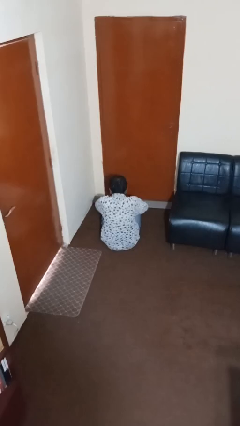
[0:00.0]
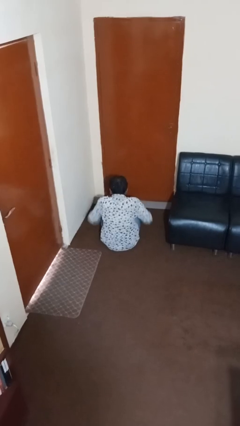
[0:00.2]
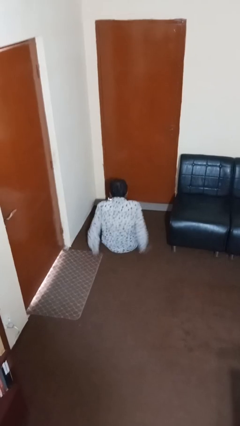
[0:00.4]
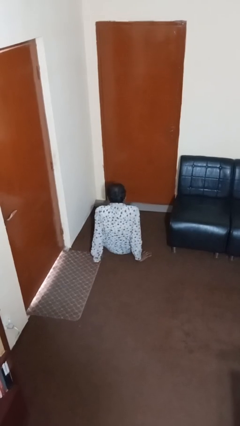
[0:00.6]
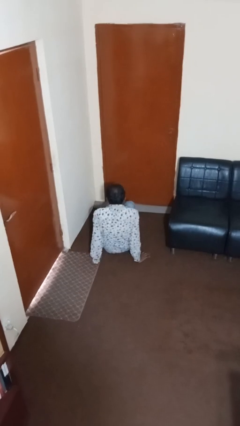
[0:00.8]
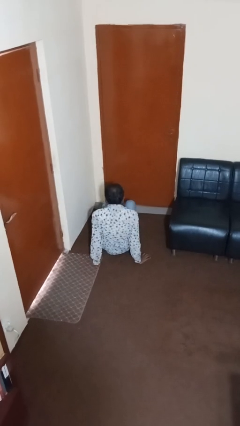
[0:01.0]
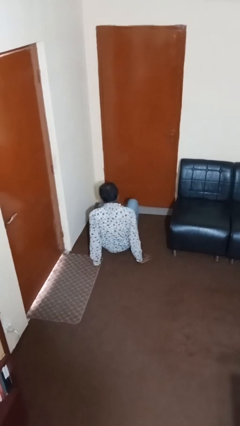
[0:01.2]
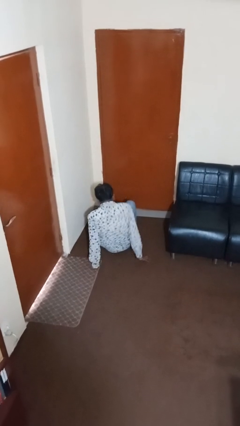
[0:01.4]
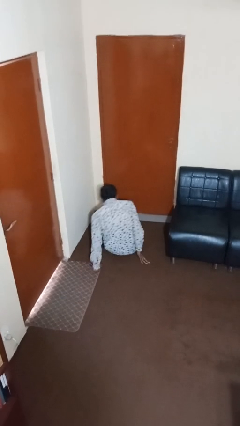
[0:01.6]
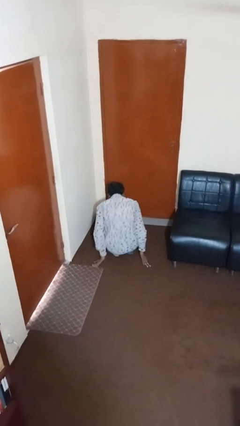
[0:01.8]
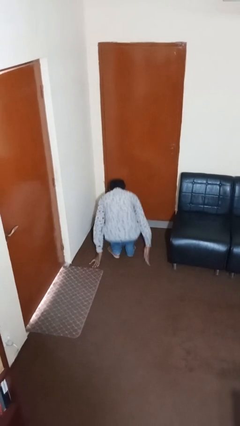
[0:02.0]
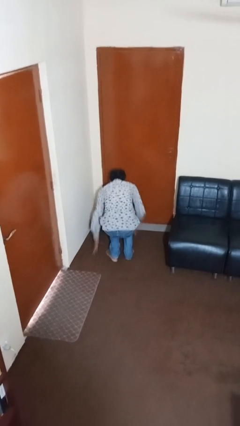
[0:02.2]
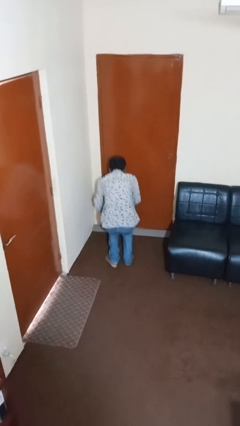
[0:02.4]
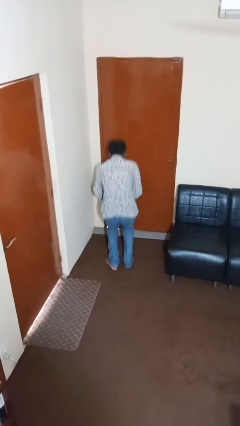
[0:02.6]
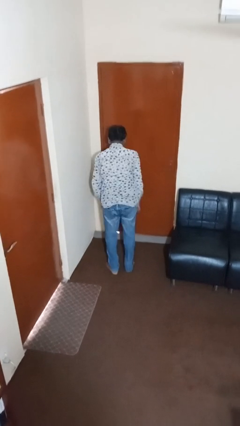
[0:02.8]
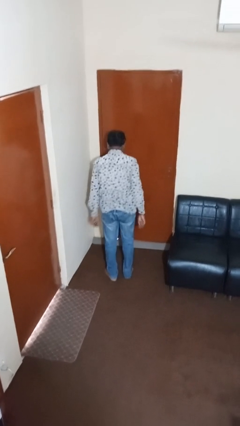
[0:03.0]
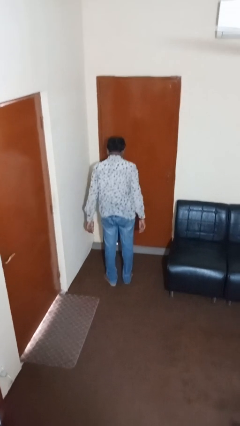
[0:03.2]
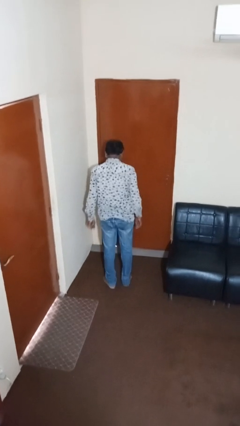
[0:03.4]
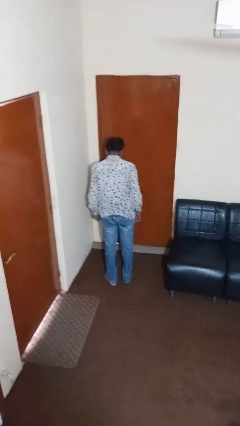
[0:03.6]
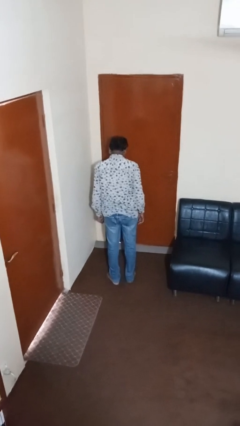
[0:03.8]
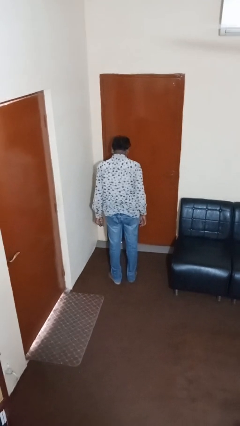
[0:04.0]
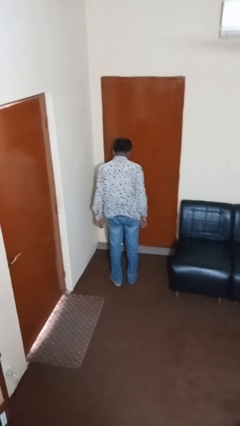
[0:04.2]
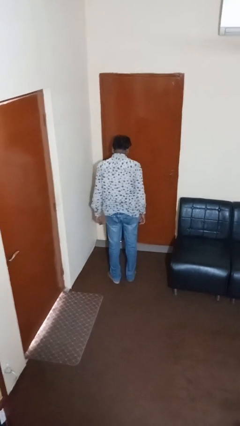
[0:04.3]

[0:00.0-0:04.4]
person stands up from floor

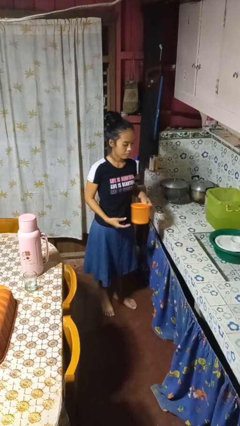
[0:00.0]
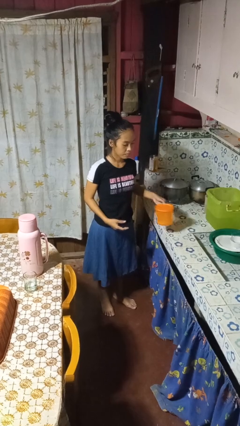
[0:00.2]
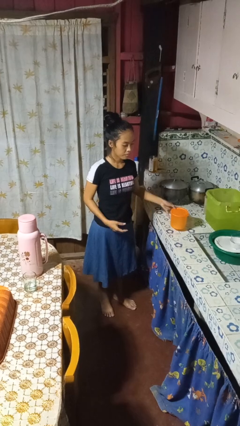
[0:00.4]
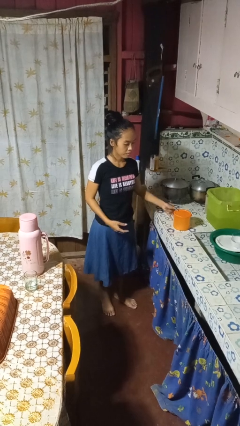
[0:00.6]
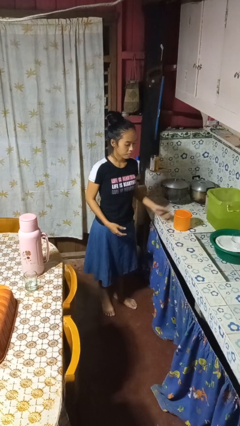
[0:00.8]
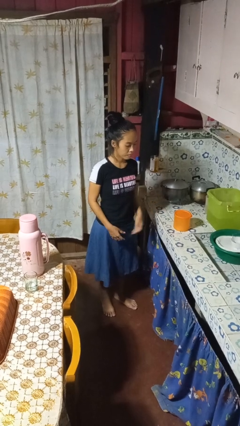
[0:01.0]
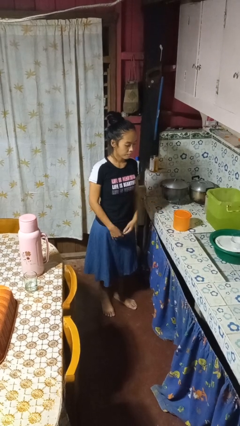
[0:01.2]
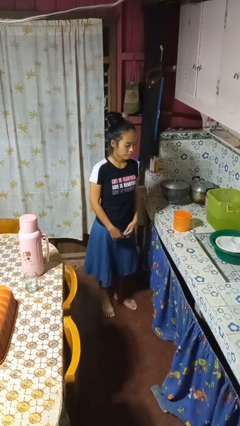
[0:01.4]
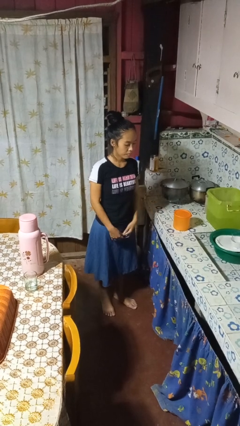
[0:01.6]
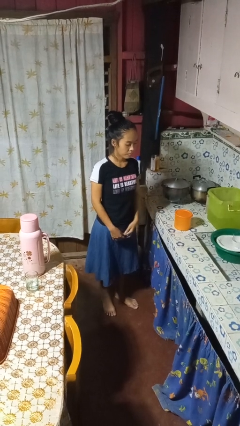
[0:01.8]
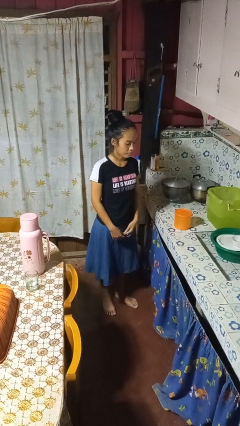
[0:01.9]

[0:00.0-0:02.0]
person puts down object on countertop

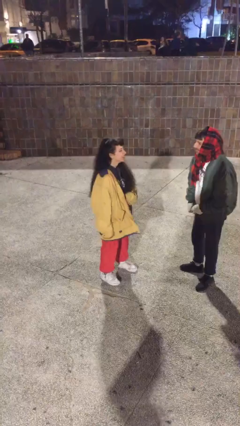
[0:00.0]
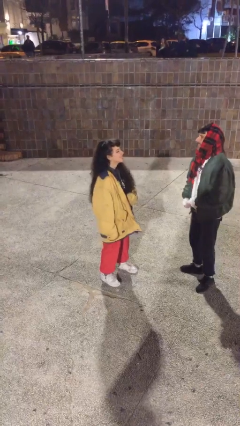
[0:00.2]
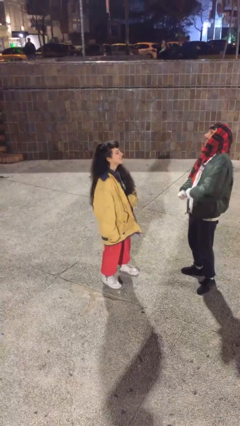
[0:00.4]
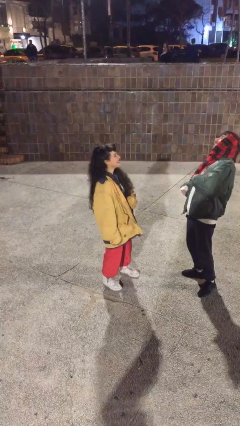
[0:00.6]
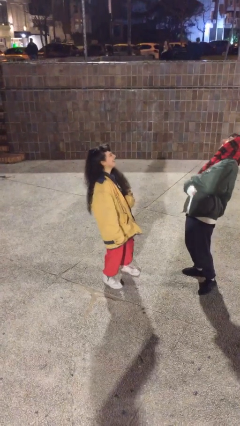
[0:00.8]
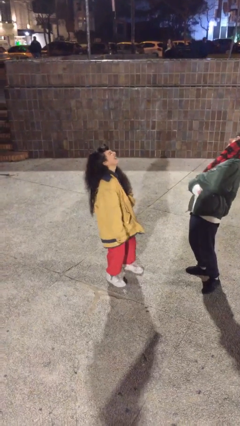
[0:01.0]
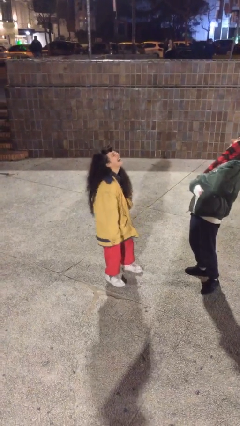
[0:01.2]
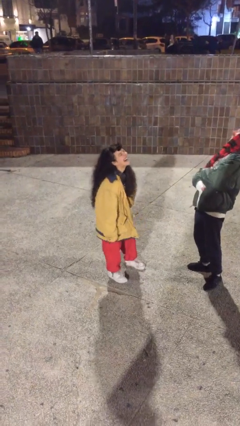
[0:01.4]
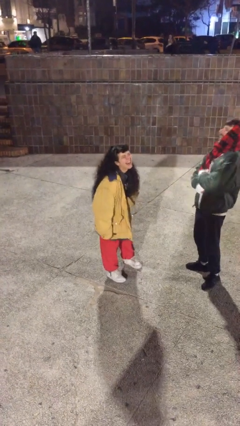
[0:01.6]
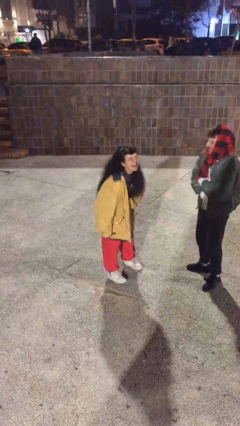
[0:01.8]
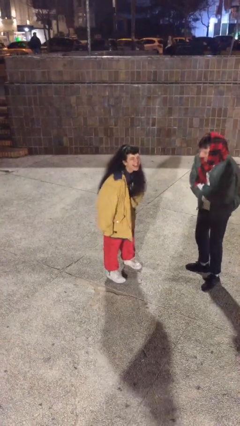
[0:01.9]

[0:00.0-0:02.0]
person laughs with person

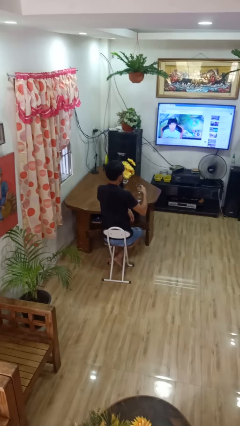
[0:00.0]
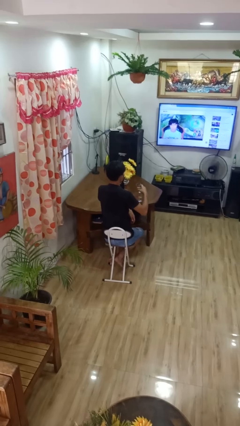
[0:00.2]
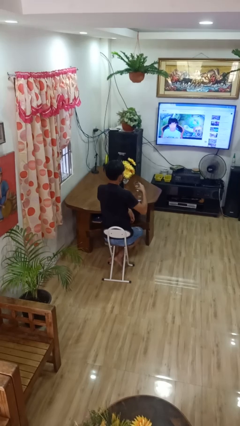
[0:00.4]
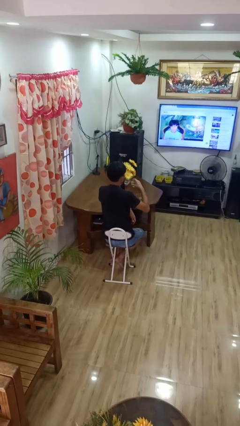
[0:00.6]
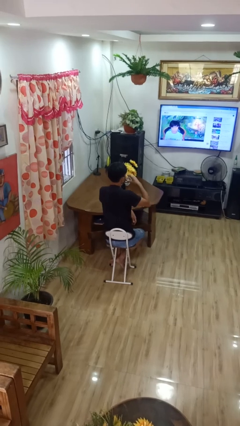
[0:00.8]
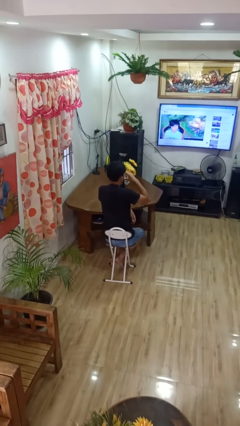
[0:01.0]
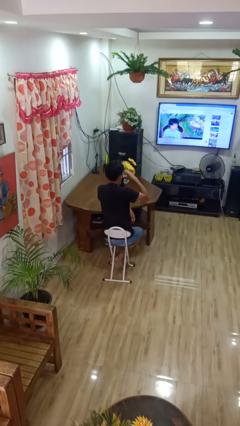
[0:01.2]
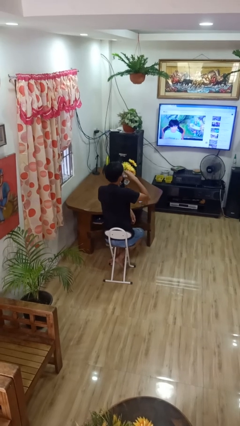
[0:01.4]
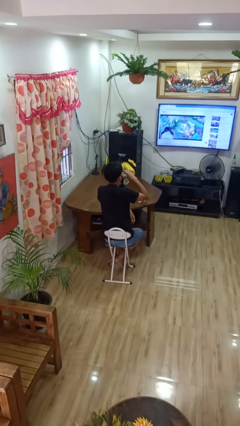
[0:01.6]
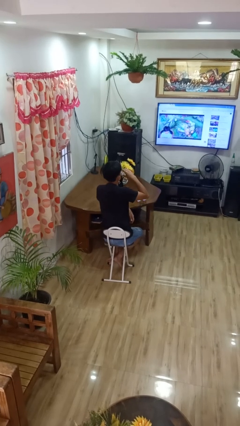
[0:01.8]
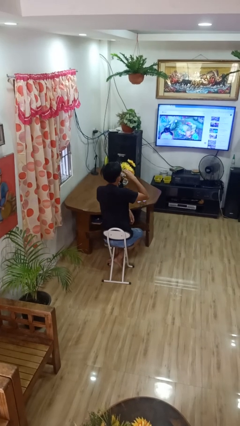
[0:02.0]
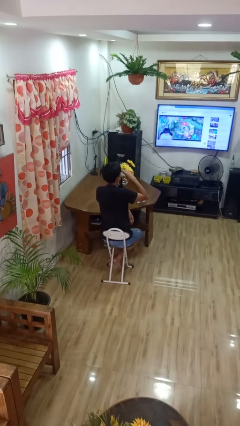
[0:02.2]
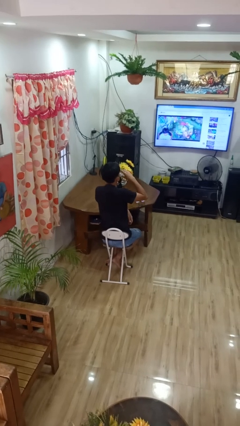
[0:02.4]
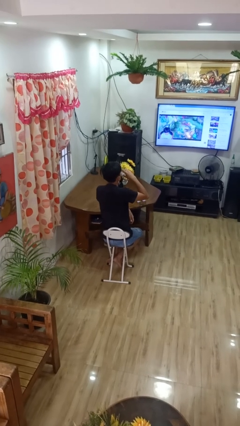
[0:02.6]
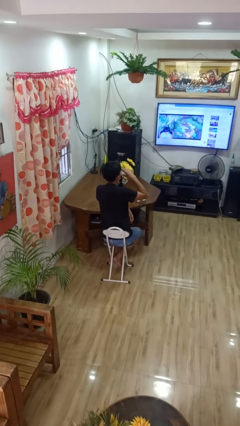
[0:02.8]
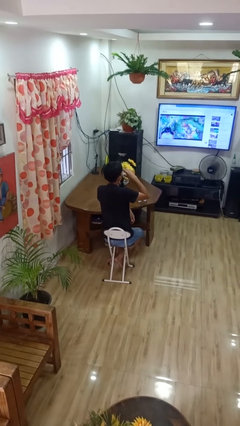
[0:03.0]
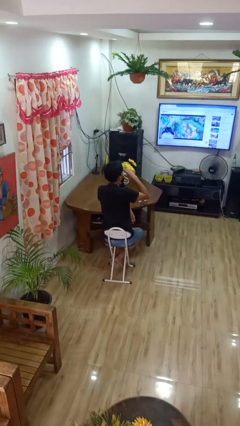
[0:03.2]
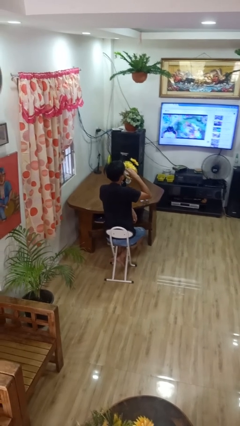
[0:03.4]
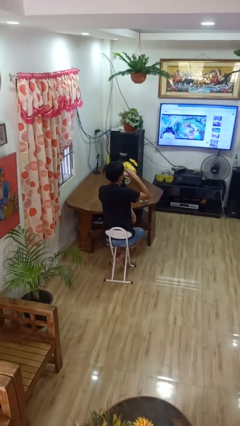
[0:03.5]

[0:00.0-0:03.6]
person drinks from shotglass

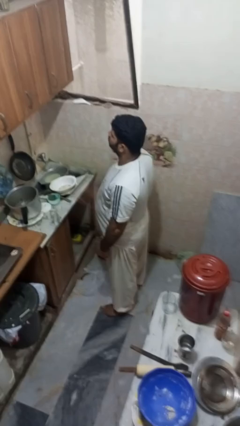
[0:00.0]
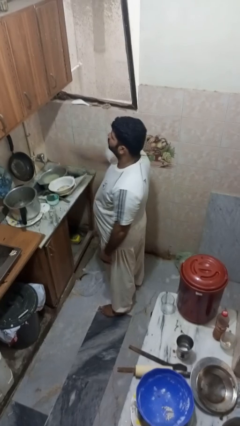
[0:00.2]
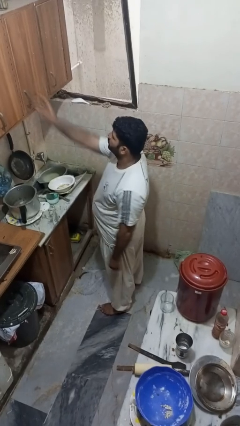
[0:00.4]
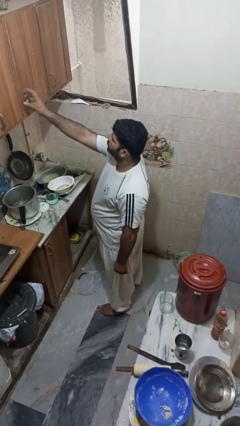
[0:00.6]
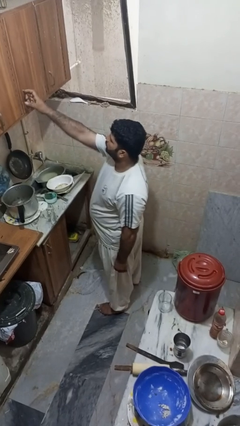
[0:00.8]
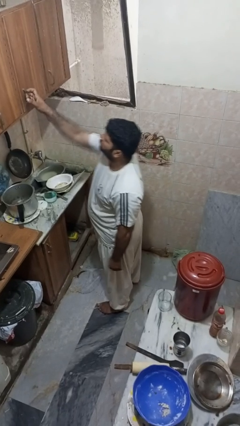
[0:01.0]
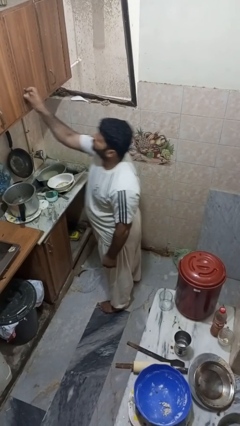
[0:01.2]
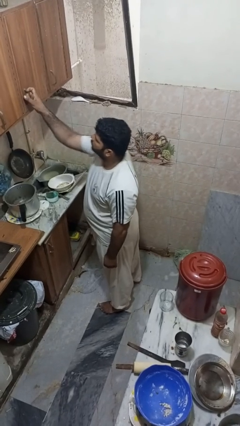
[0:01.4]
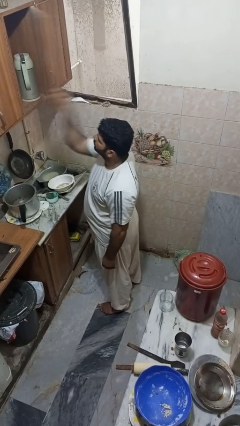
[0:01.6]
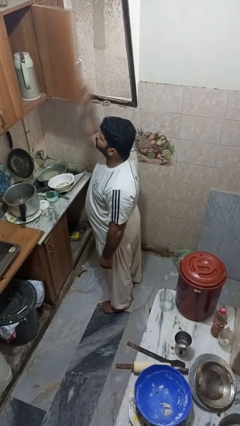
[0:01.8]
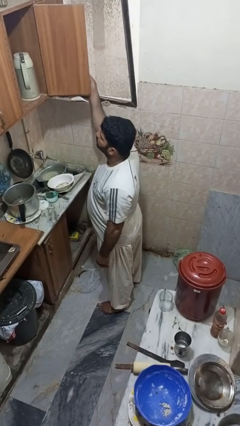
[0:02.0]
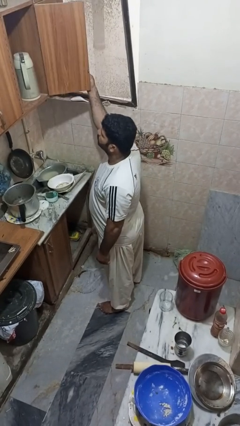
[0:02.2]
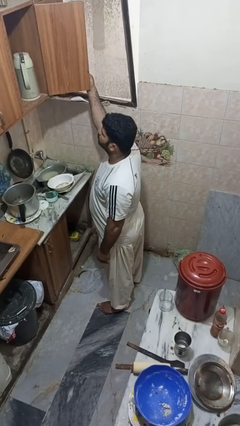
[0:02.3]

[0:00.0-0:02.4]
person opens cabinet

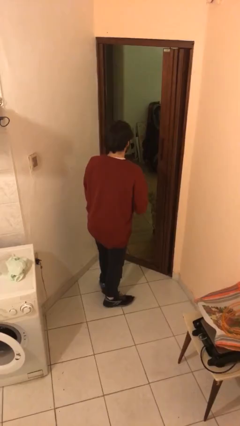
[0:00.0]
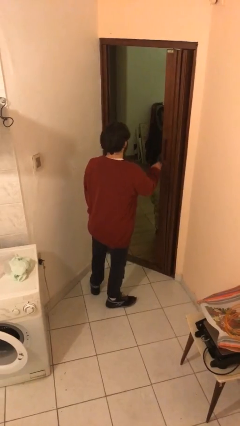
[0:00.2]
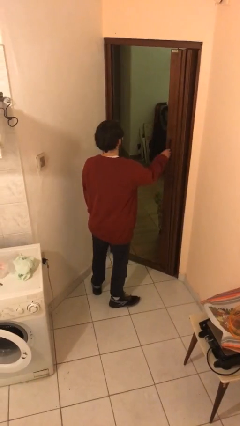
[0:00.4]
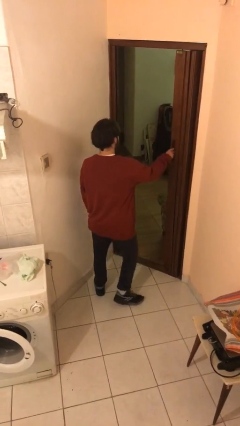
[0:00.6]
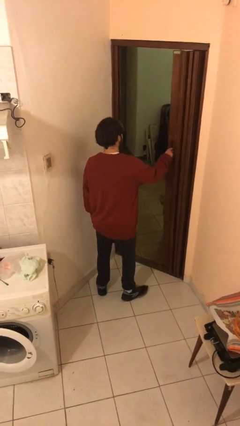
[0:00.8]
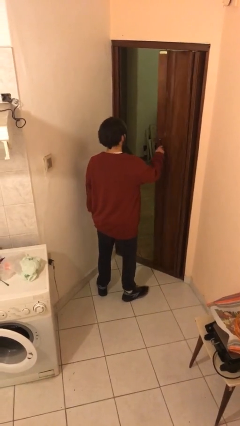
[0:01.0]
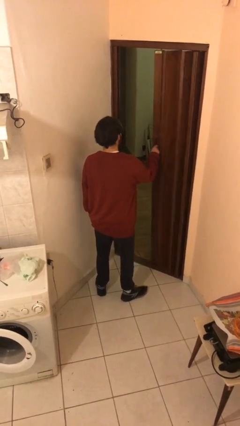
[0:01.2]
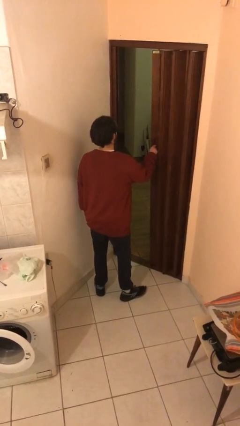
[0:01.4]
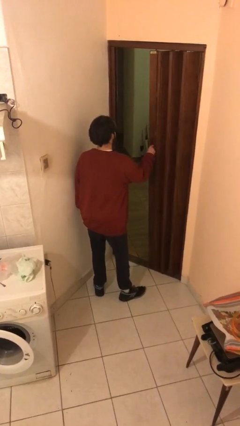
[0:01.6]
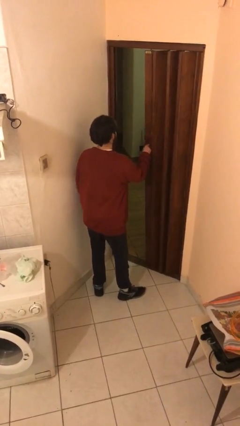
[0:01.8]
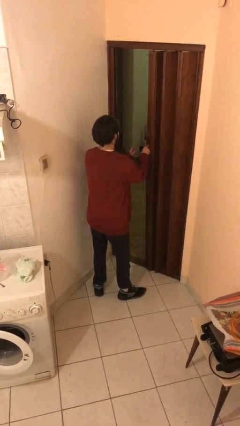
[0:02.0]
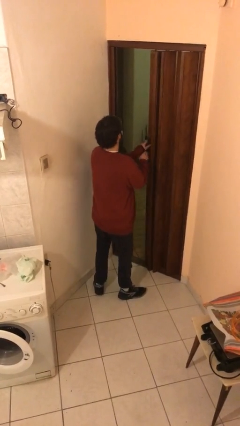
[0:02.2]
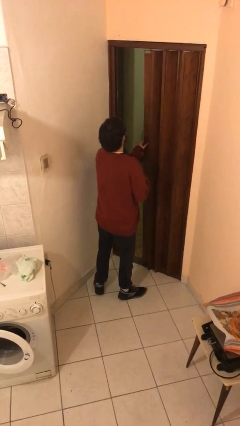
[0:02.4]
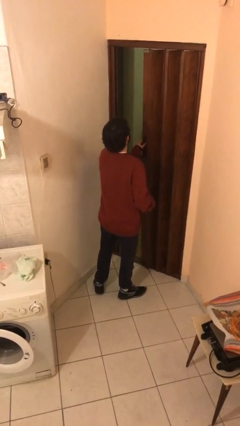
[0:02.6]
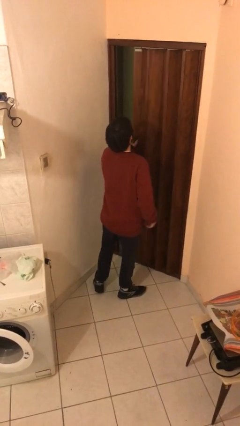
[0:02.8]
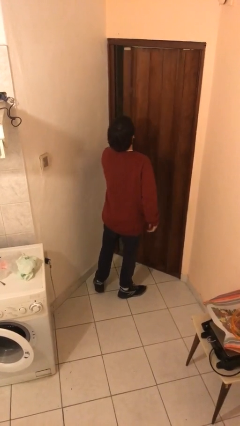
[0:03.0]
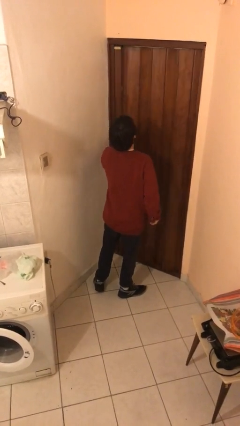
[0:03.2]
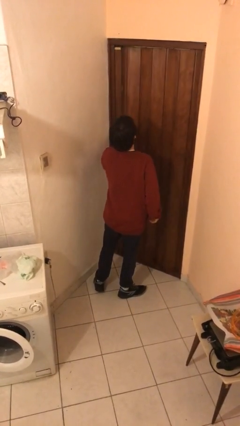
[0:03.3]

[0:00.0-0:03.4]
person closes sliding door
